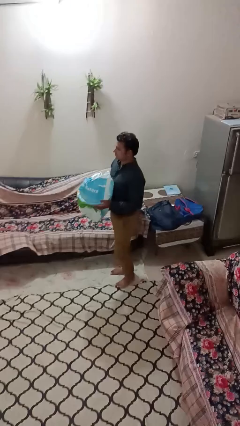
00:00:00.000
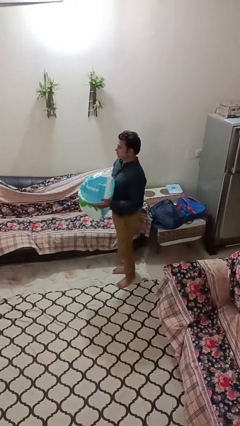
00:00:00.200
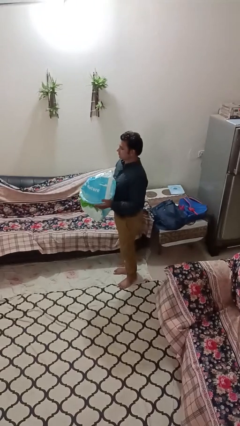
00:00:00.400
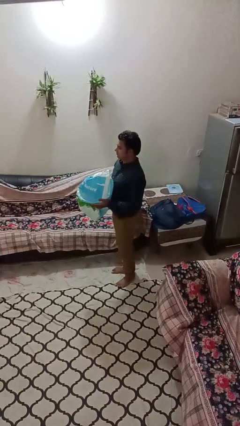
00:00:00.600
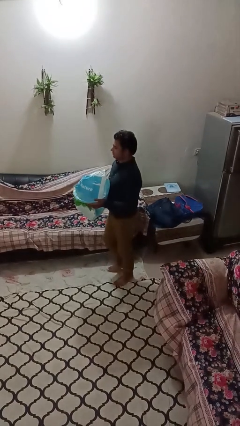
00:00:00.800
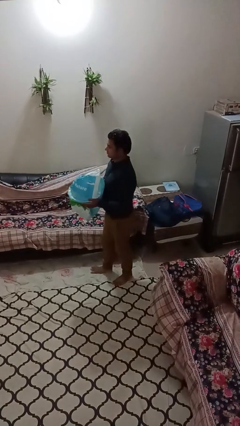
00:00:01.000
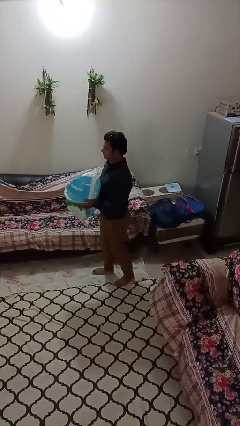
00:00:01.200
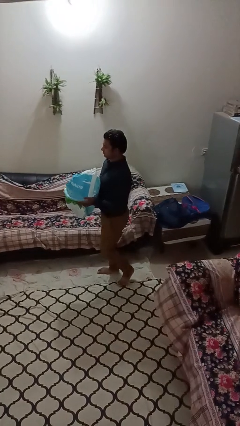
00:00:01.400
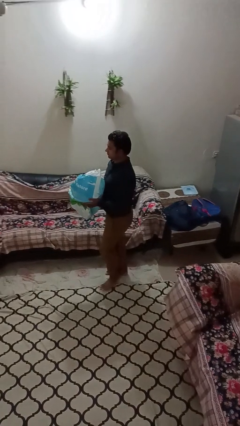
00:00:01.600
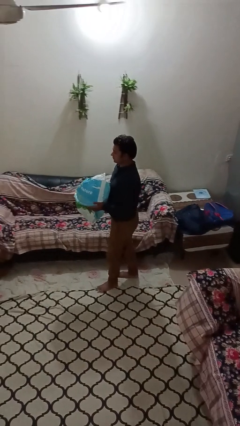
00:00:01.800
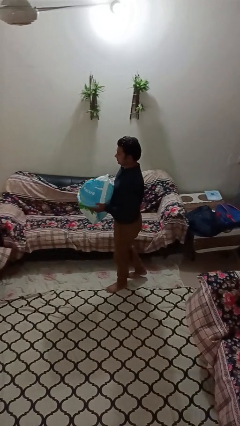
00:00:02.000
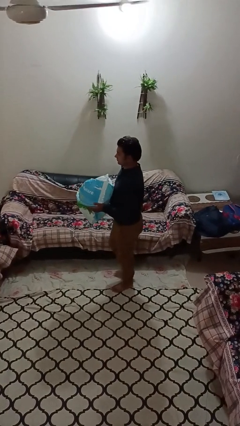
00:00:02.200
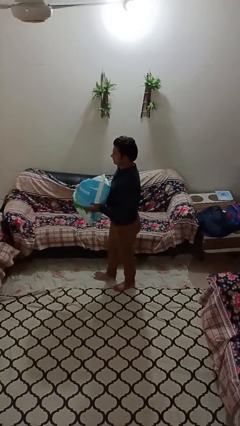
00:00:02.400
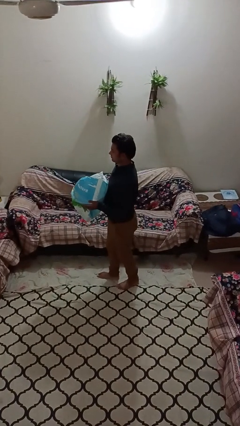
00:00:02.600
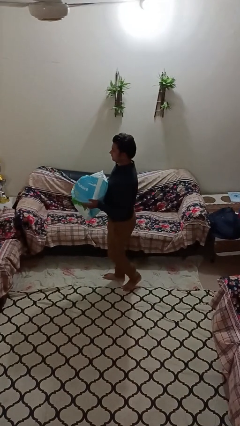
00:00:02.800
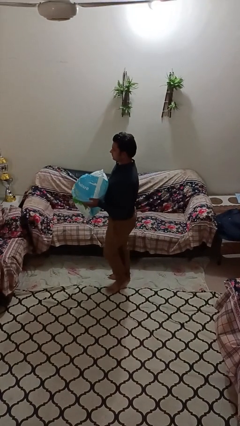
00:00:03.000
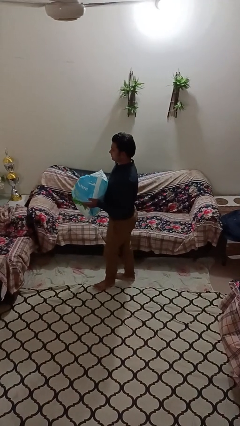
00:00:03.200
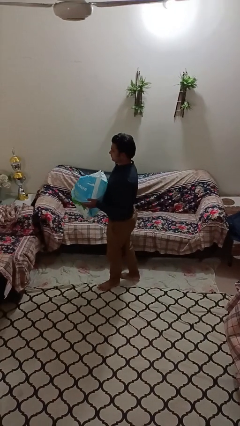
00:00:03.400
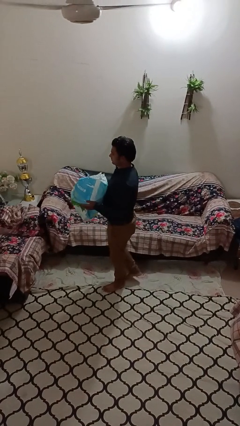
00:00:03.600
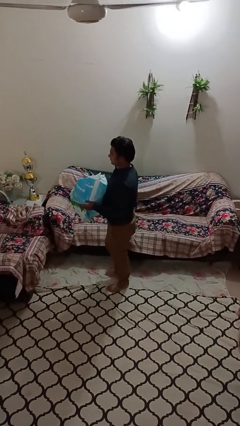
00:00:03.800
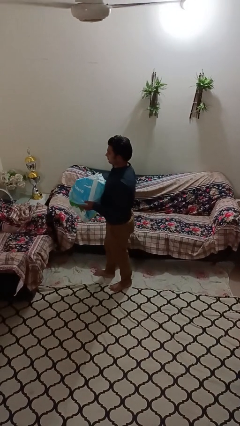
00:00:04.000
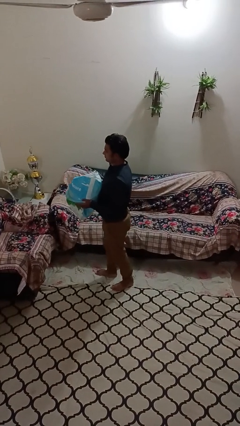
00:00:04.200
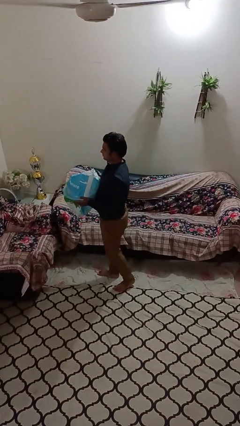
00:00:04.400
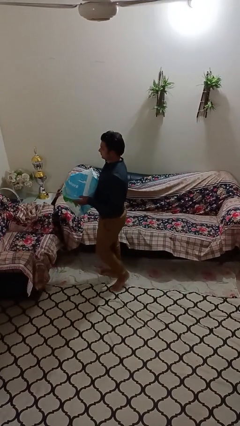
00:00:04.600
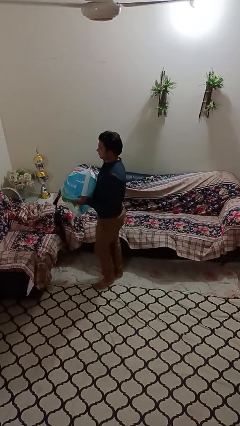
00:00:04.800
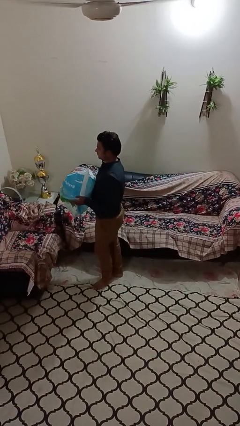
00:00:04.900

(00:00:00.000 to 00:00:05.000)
person carries groceries

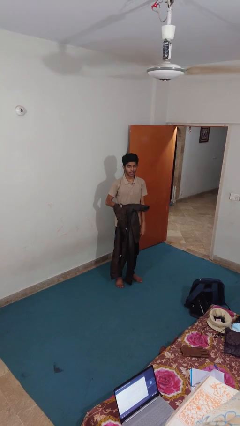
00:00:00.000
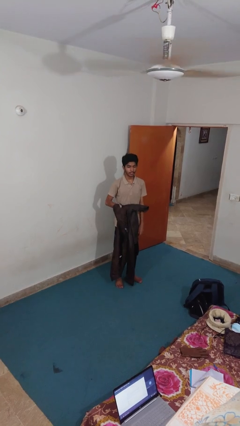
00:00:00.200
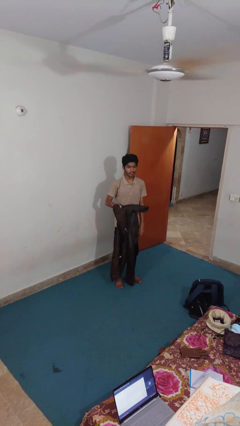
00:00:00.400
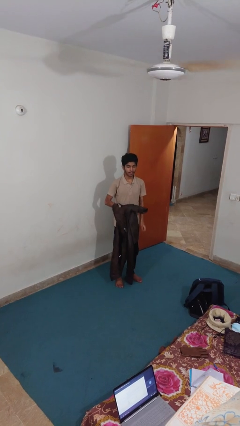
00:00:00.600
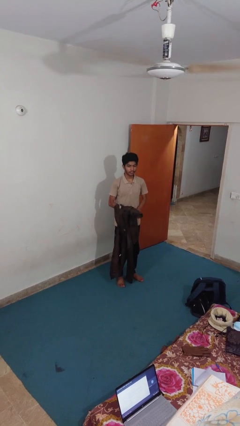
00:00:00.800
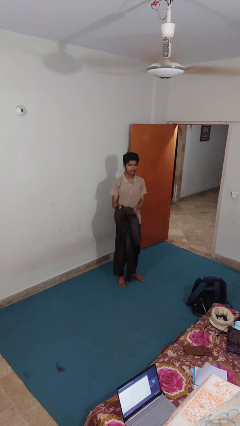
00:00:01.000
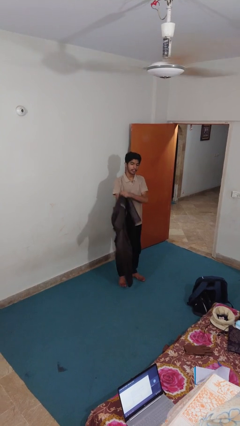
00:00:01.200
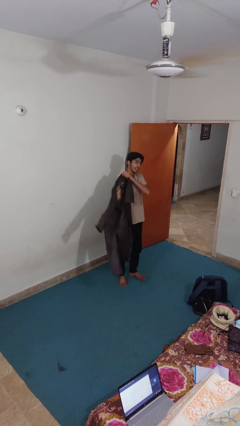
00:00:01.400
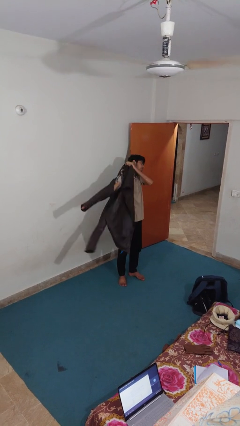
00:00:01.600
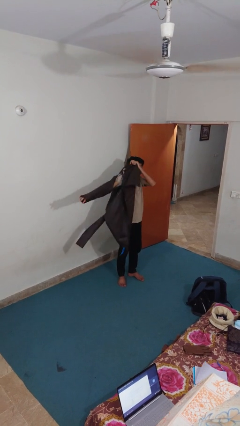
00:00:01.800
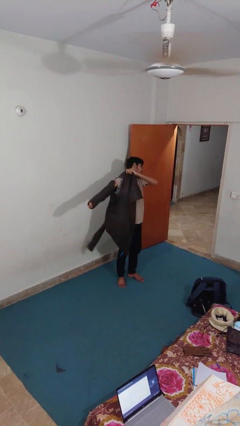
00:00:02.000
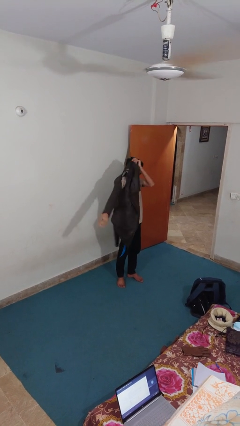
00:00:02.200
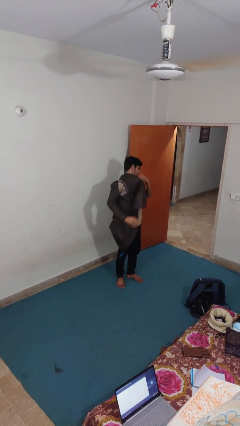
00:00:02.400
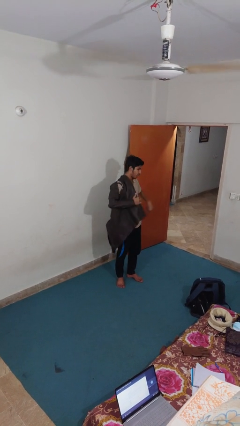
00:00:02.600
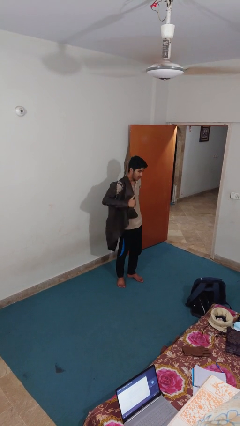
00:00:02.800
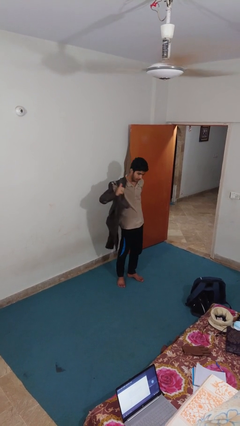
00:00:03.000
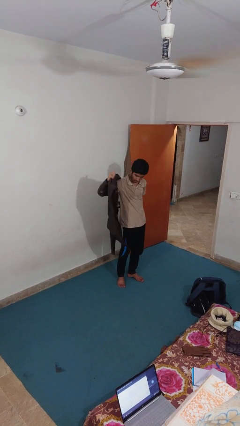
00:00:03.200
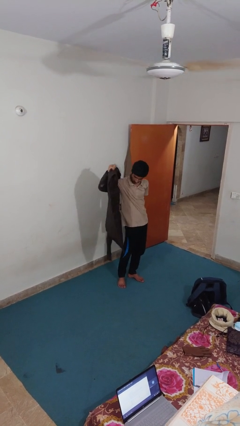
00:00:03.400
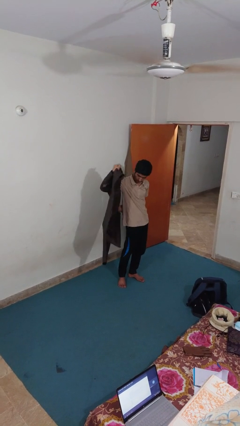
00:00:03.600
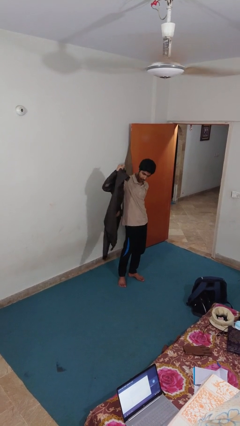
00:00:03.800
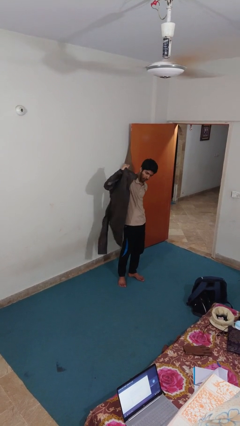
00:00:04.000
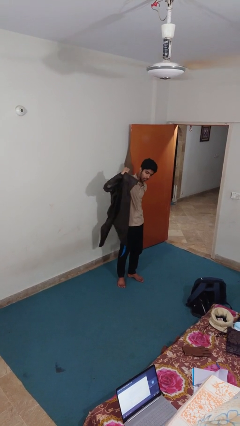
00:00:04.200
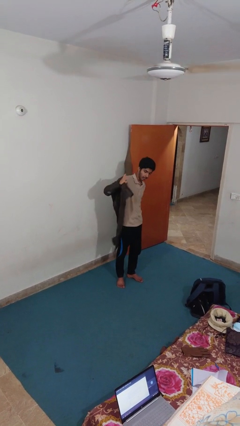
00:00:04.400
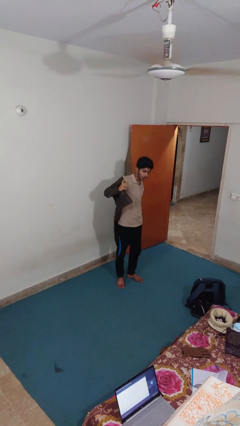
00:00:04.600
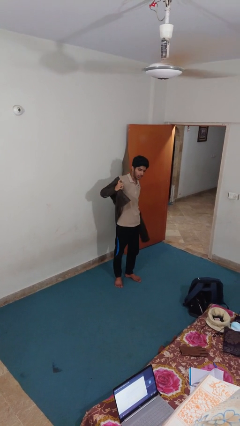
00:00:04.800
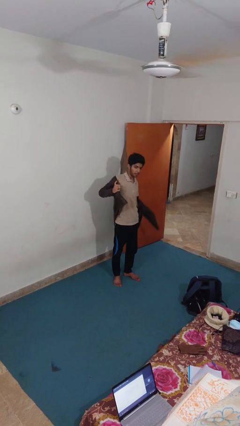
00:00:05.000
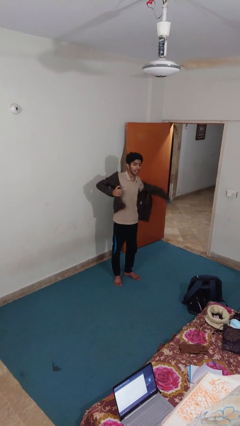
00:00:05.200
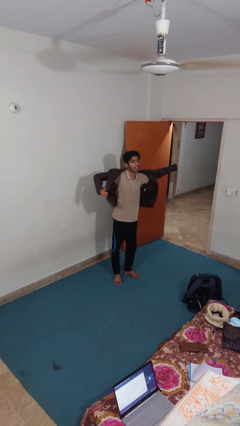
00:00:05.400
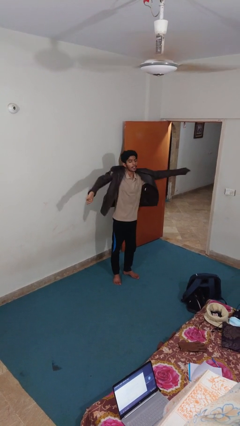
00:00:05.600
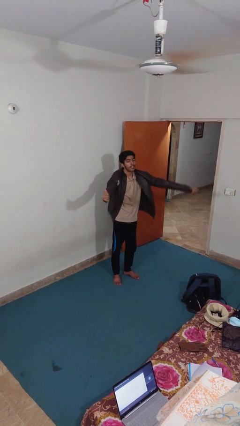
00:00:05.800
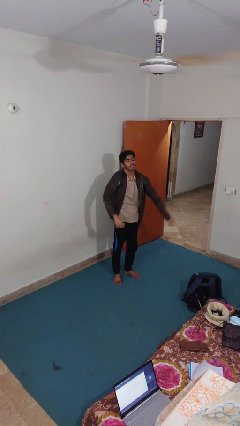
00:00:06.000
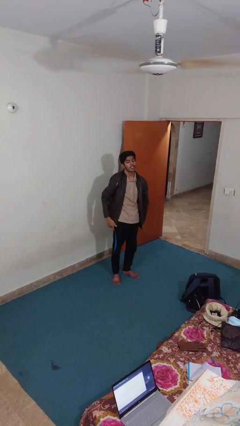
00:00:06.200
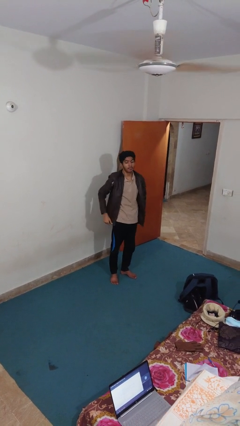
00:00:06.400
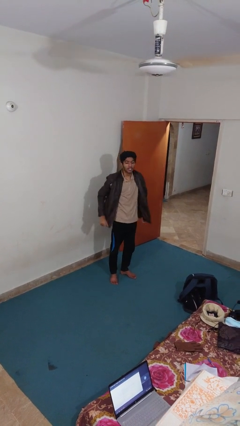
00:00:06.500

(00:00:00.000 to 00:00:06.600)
person puts on jacket

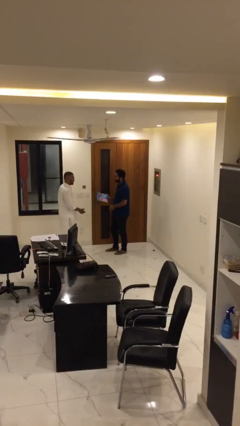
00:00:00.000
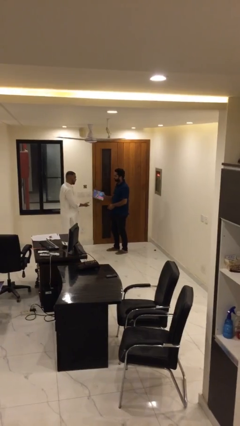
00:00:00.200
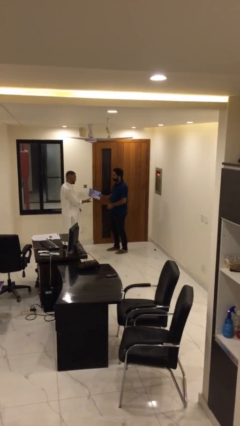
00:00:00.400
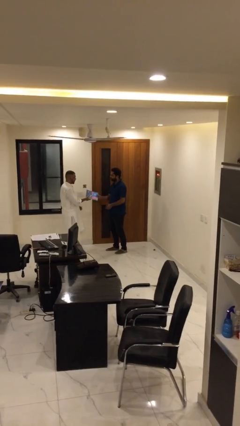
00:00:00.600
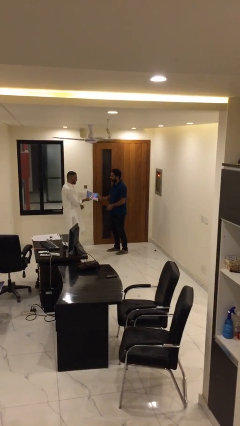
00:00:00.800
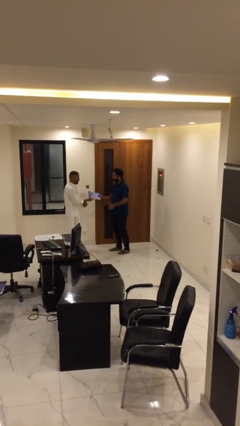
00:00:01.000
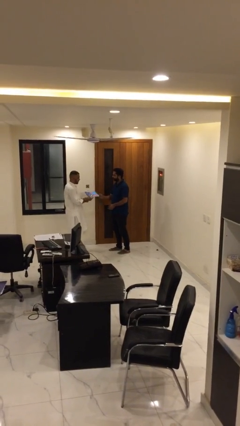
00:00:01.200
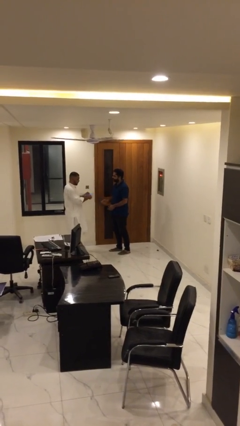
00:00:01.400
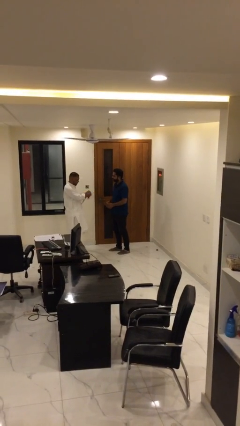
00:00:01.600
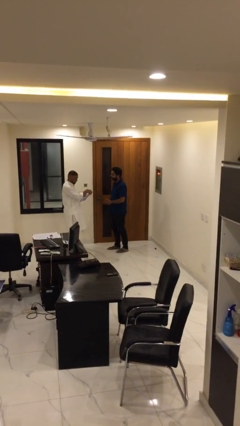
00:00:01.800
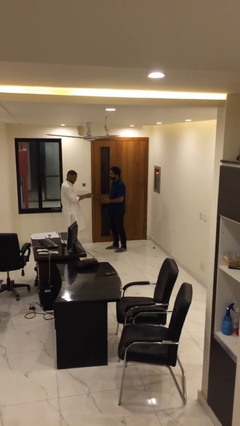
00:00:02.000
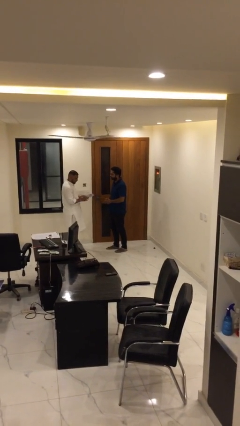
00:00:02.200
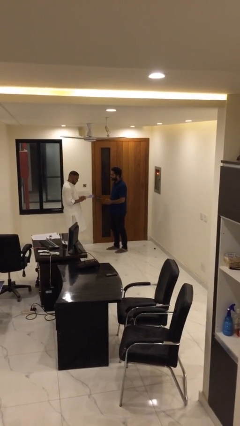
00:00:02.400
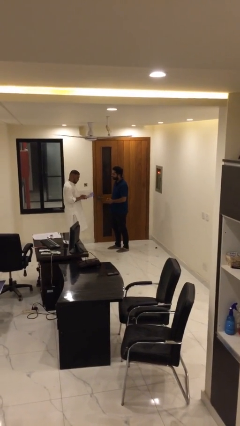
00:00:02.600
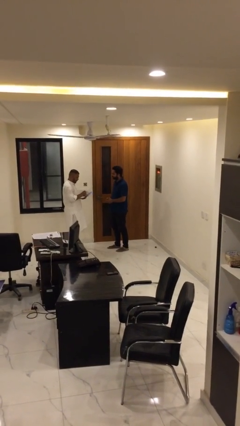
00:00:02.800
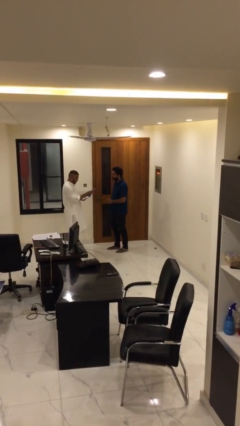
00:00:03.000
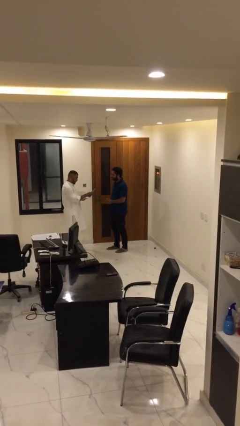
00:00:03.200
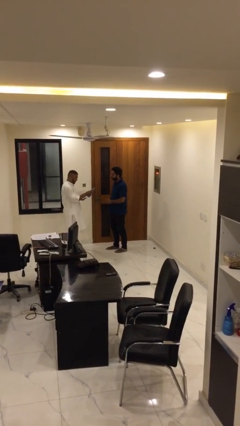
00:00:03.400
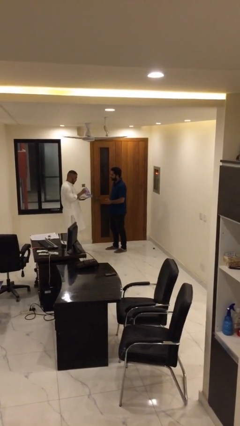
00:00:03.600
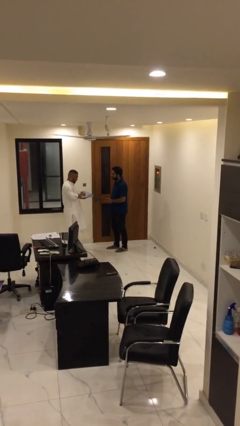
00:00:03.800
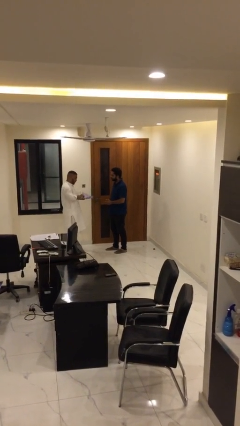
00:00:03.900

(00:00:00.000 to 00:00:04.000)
person transfers object to person

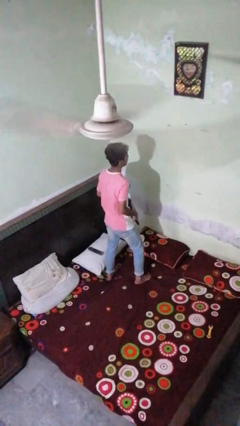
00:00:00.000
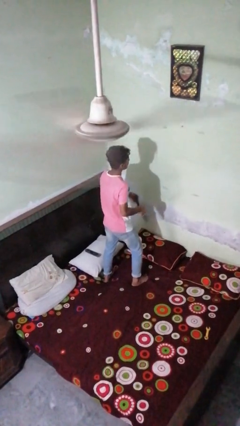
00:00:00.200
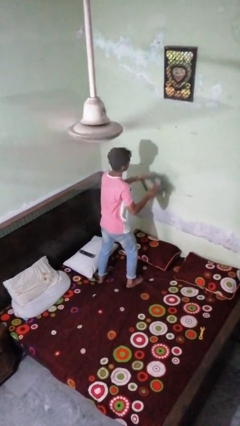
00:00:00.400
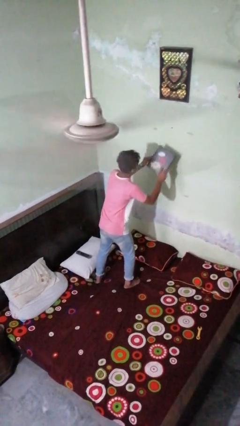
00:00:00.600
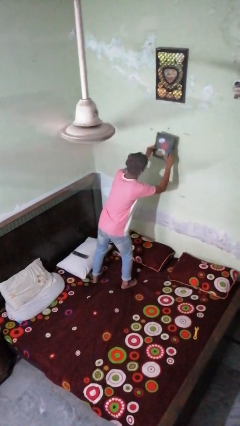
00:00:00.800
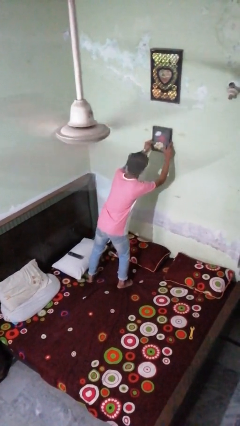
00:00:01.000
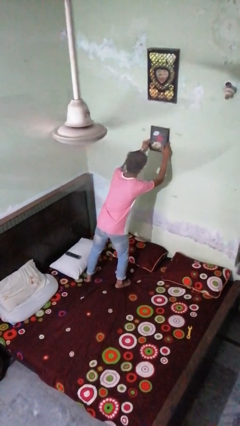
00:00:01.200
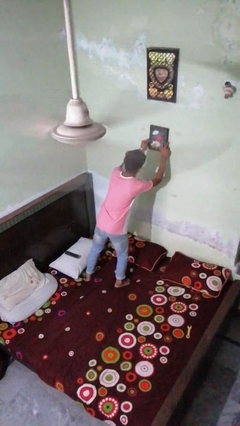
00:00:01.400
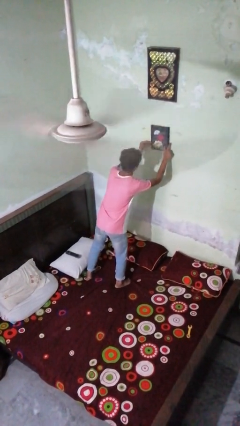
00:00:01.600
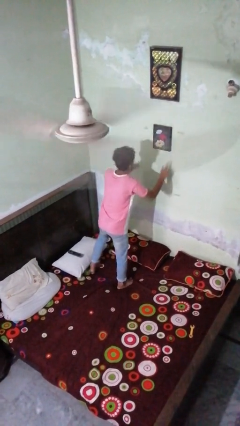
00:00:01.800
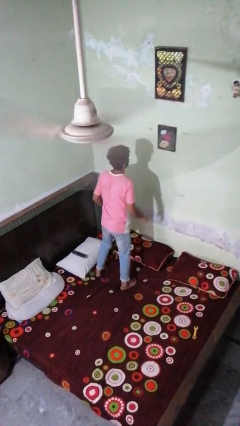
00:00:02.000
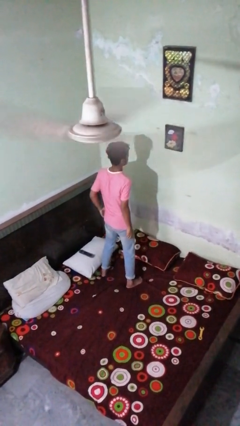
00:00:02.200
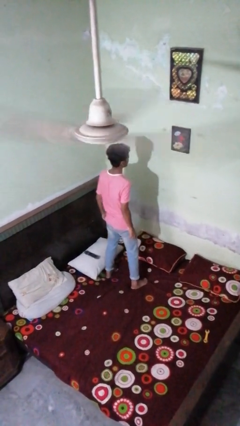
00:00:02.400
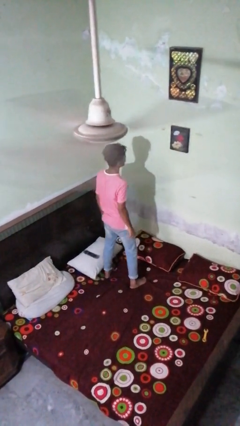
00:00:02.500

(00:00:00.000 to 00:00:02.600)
person puts up picture frame
